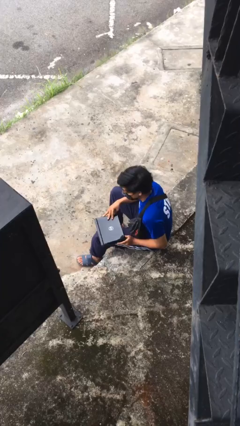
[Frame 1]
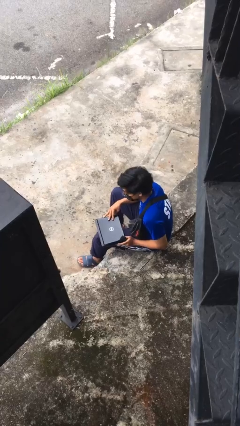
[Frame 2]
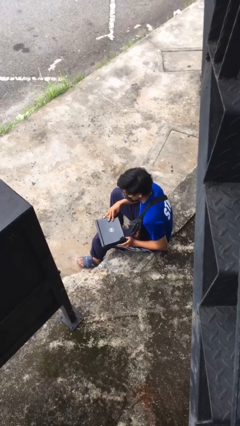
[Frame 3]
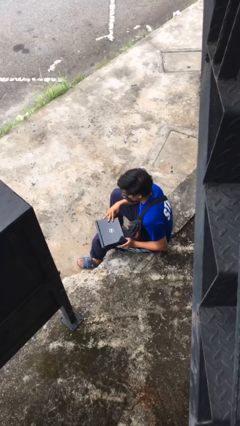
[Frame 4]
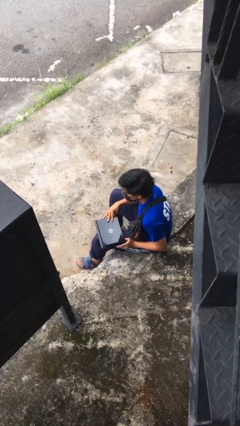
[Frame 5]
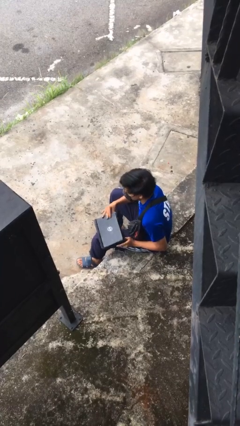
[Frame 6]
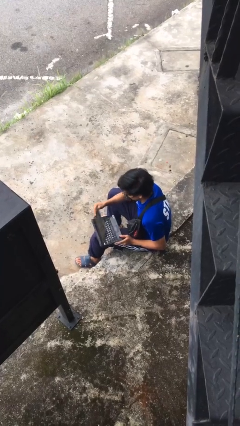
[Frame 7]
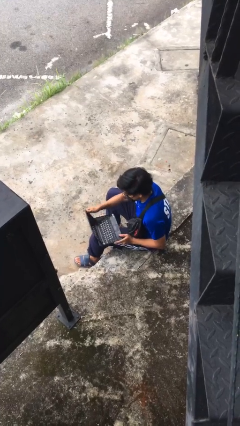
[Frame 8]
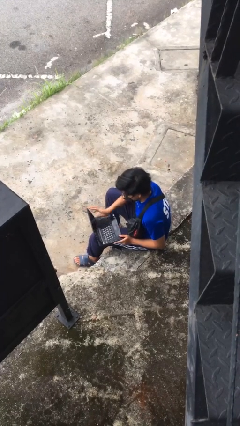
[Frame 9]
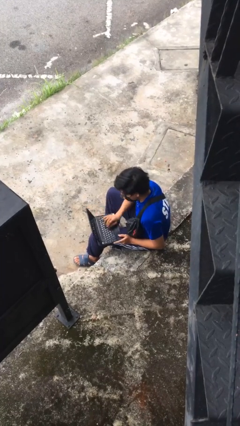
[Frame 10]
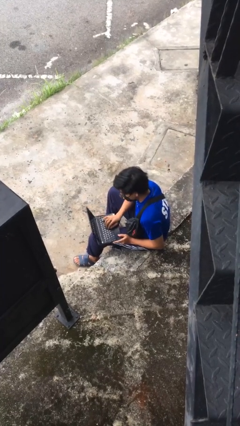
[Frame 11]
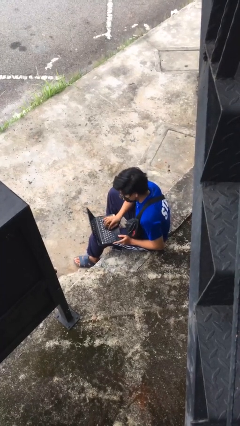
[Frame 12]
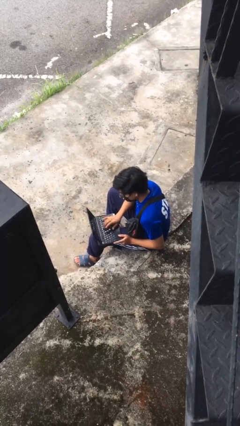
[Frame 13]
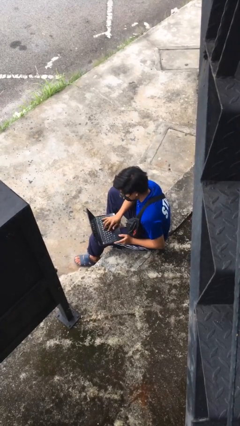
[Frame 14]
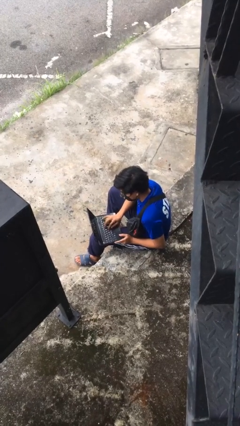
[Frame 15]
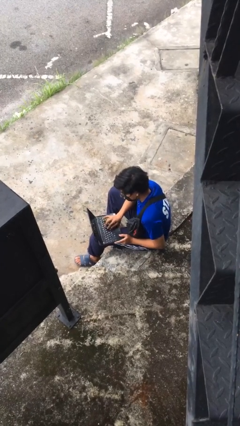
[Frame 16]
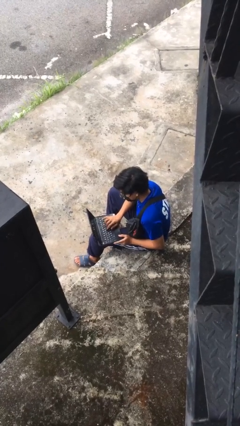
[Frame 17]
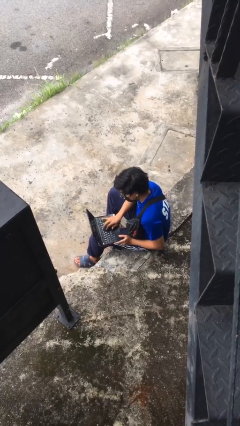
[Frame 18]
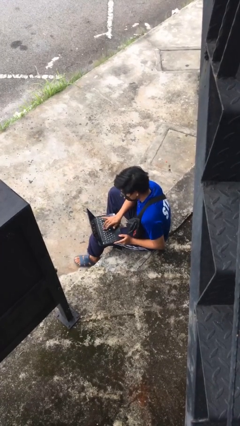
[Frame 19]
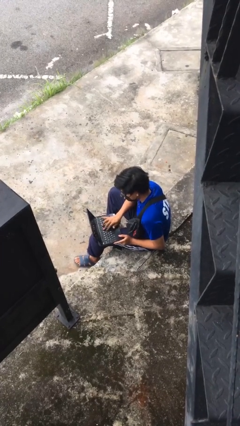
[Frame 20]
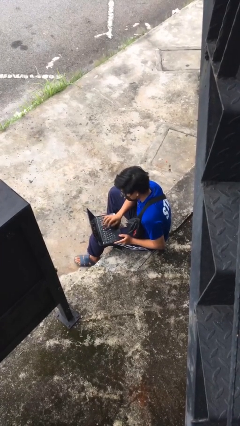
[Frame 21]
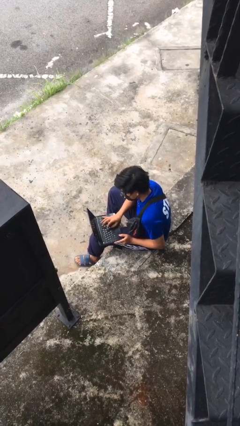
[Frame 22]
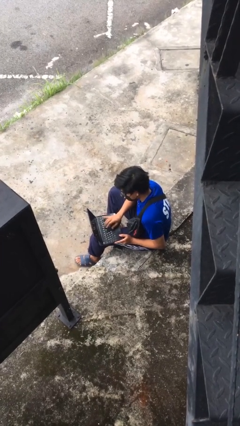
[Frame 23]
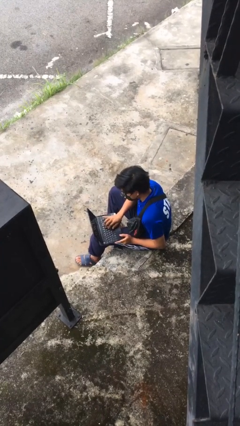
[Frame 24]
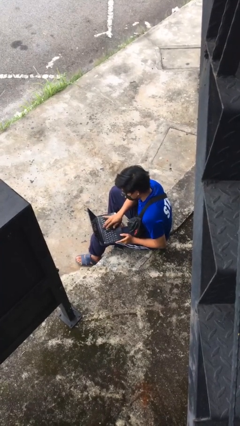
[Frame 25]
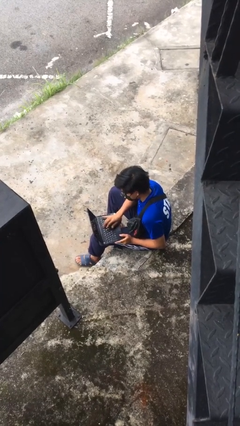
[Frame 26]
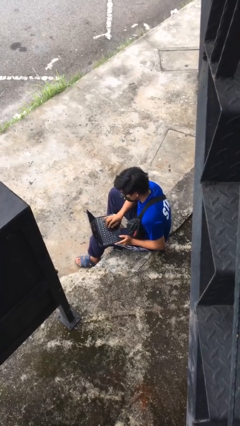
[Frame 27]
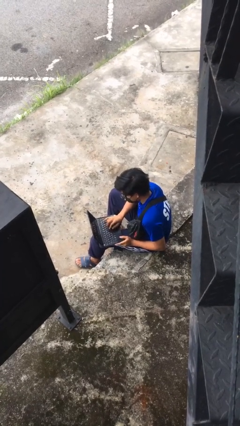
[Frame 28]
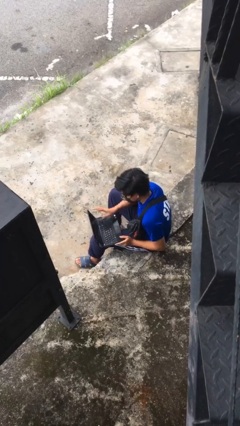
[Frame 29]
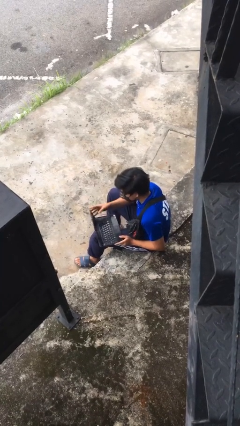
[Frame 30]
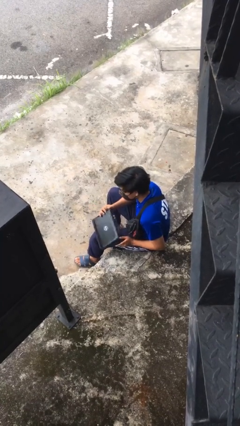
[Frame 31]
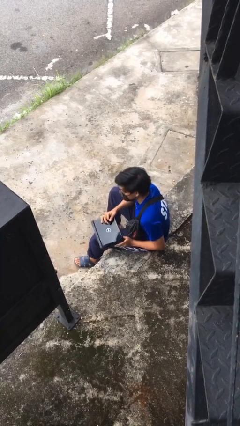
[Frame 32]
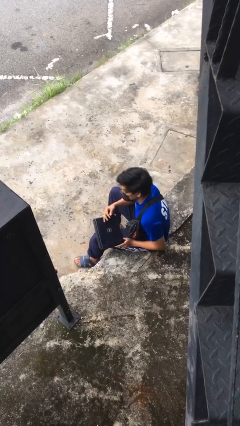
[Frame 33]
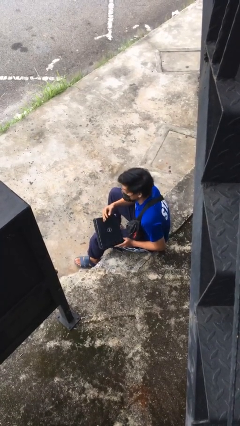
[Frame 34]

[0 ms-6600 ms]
person interacts with laptop

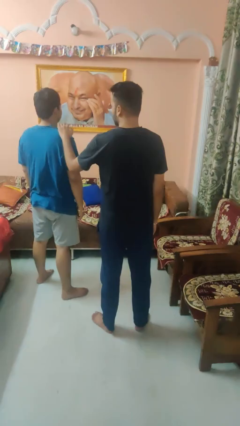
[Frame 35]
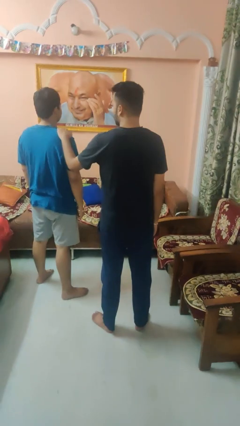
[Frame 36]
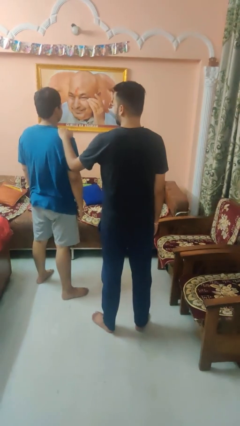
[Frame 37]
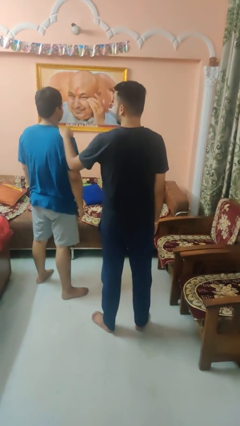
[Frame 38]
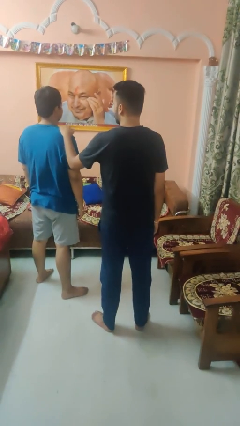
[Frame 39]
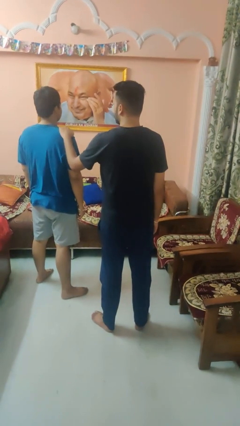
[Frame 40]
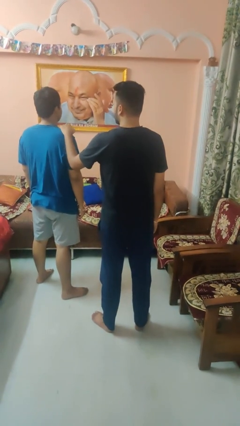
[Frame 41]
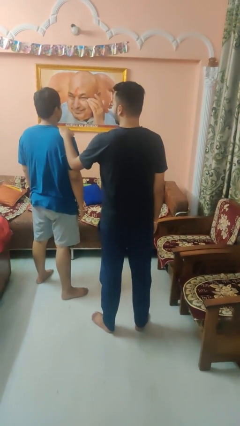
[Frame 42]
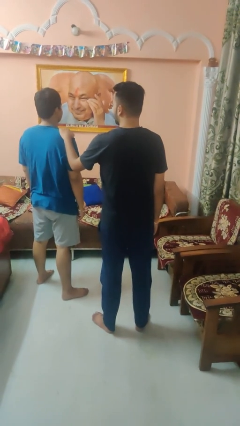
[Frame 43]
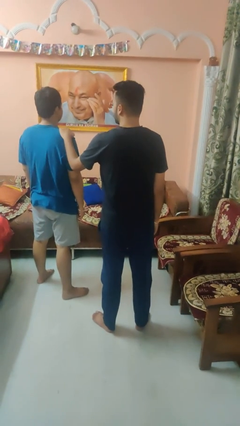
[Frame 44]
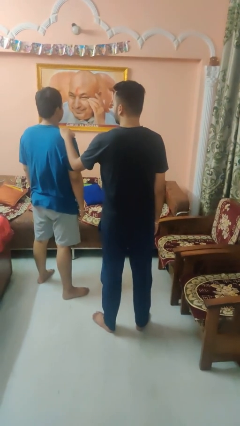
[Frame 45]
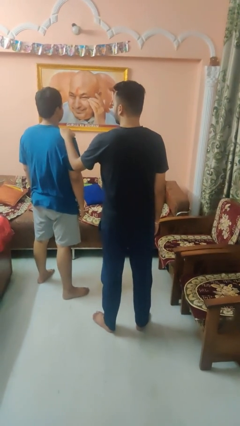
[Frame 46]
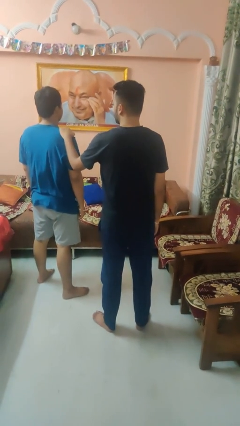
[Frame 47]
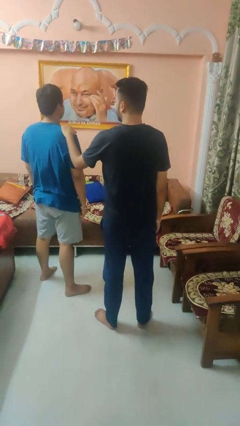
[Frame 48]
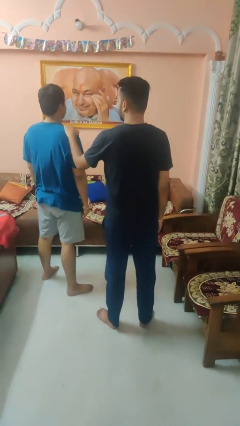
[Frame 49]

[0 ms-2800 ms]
person pounds shoulders of person

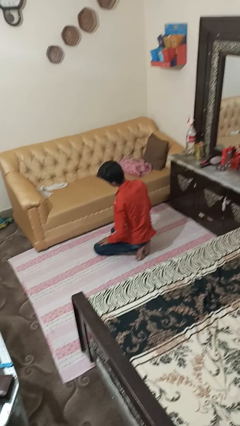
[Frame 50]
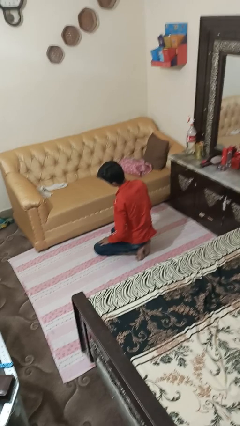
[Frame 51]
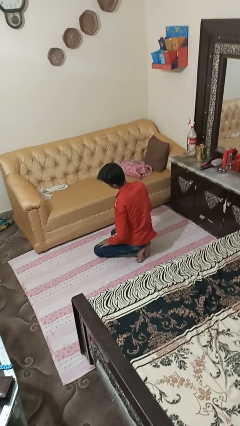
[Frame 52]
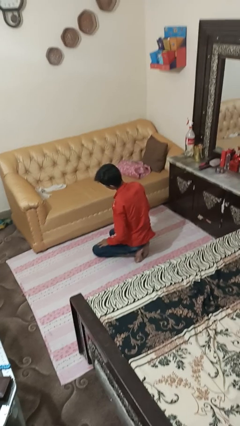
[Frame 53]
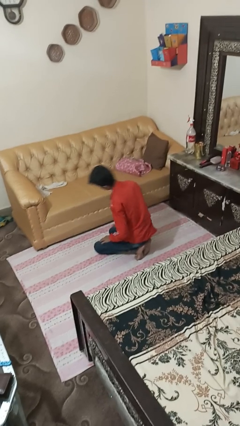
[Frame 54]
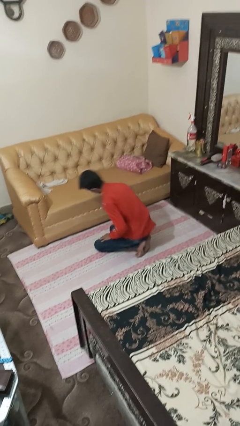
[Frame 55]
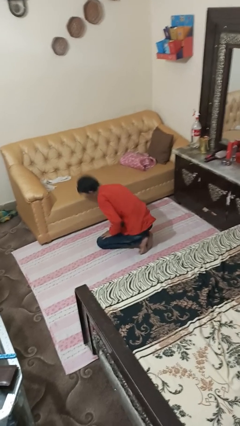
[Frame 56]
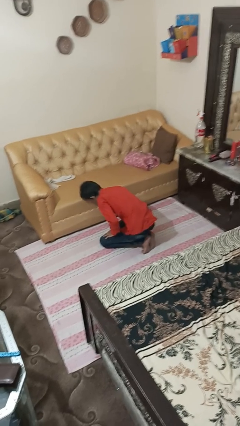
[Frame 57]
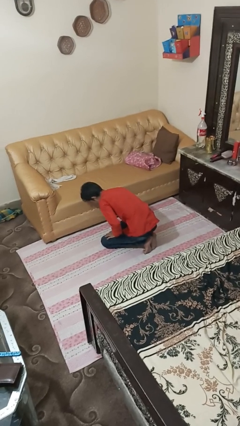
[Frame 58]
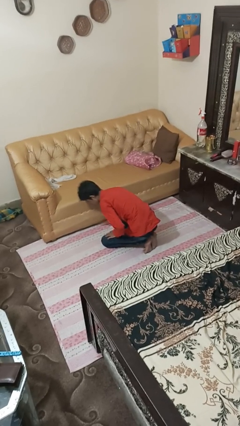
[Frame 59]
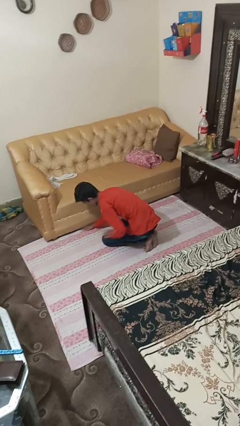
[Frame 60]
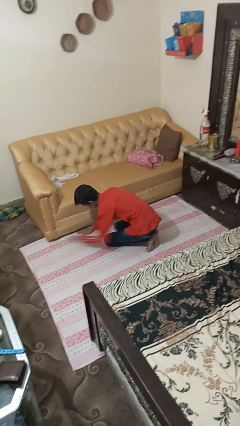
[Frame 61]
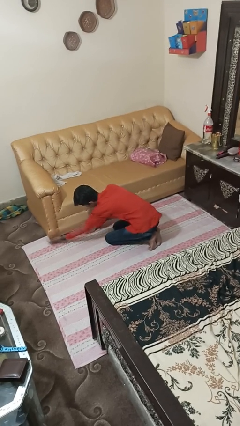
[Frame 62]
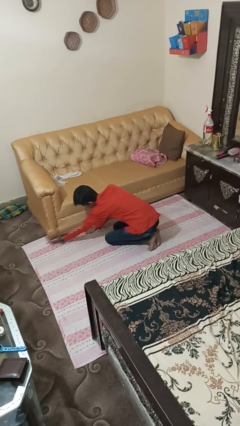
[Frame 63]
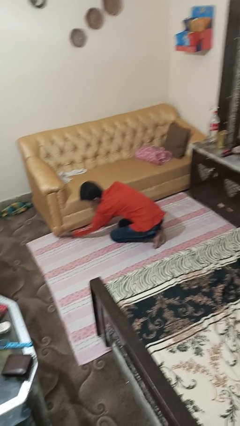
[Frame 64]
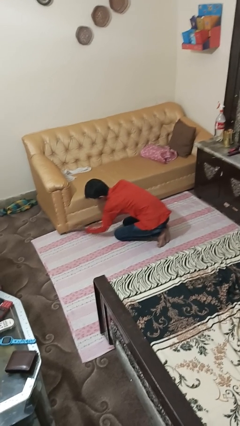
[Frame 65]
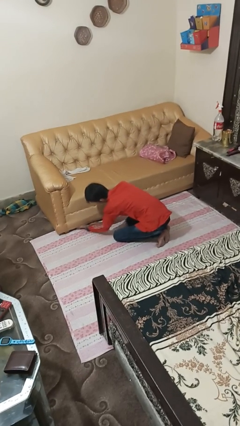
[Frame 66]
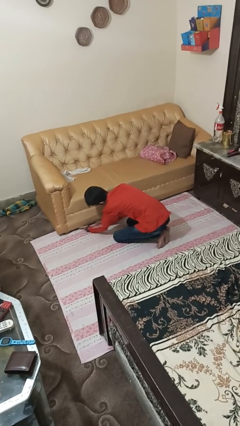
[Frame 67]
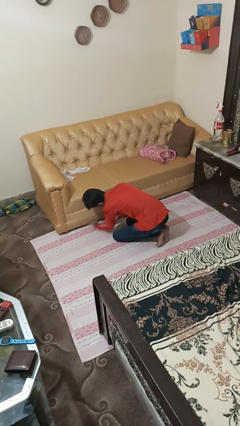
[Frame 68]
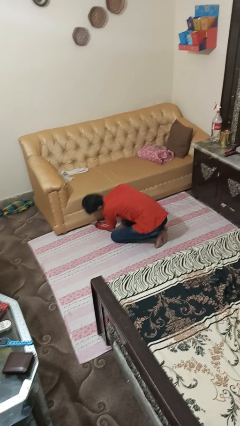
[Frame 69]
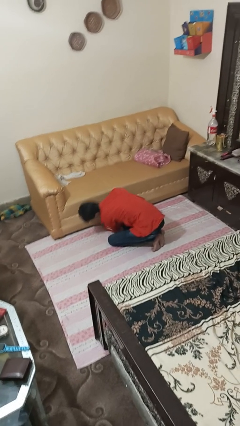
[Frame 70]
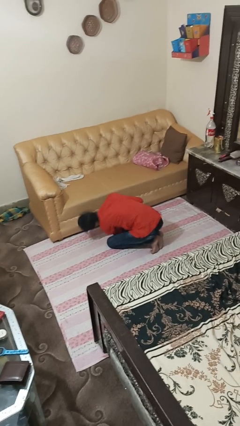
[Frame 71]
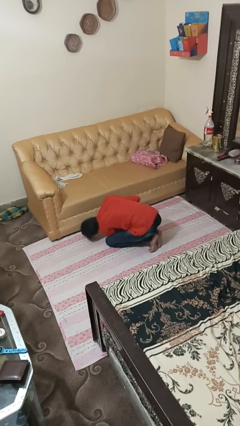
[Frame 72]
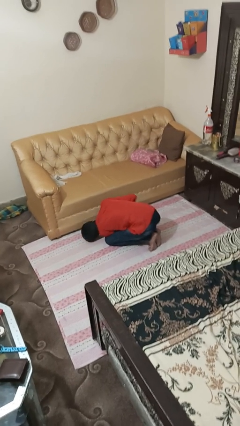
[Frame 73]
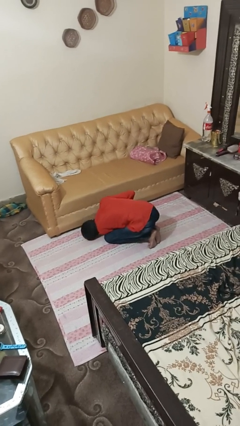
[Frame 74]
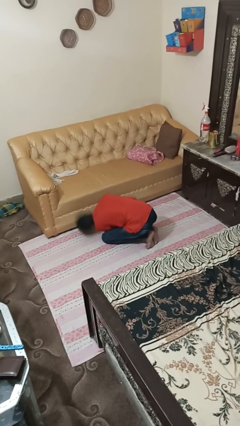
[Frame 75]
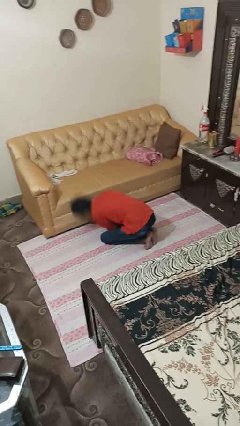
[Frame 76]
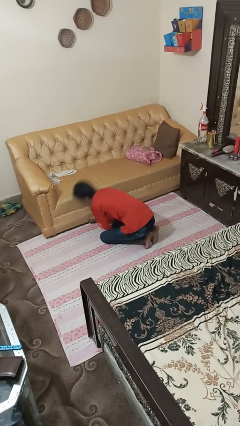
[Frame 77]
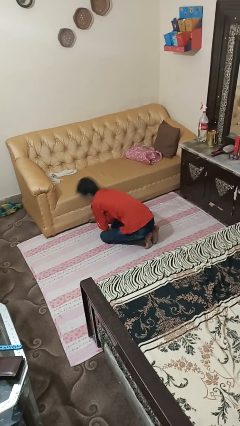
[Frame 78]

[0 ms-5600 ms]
person searches under couch

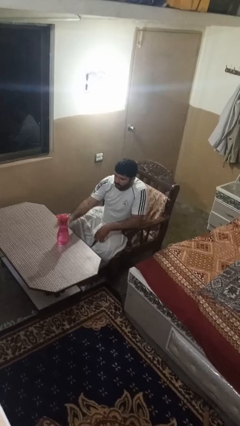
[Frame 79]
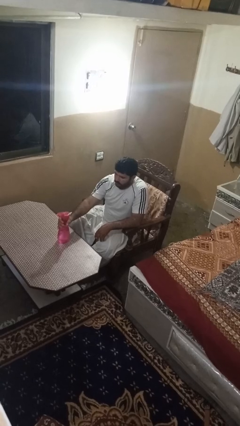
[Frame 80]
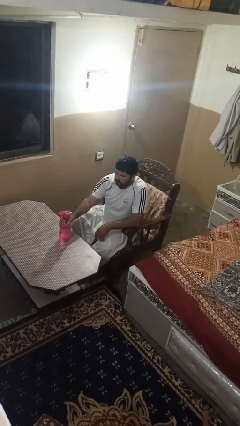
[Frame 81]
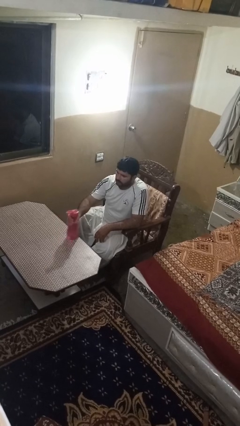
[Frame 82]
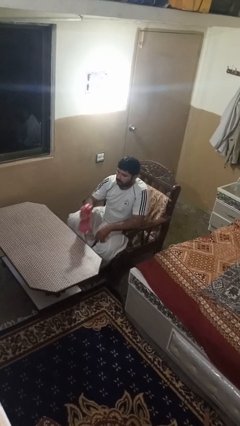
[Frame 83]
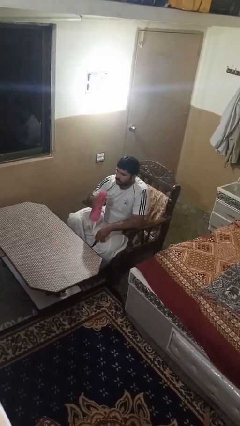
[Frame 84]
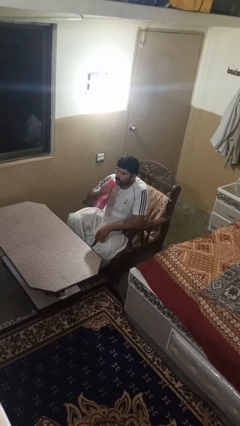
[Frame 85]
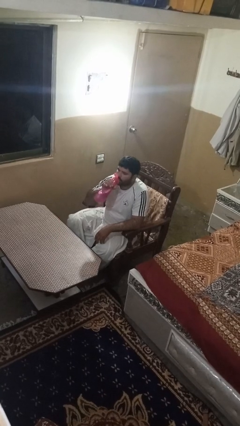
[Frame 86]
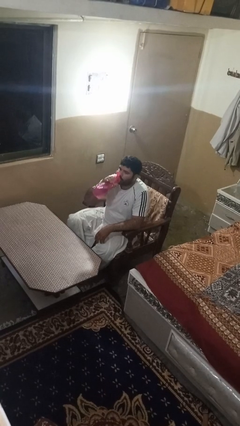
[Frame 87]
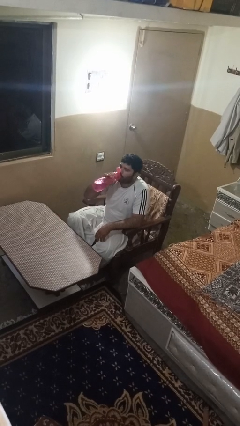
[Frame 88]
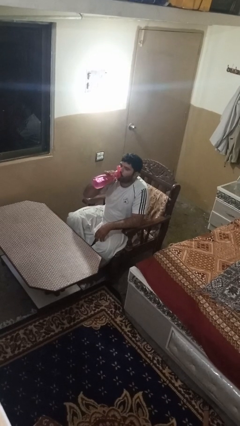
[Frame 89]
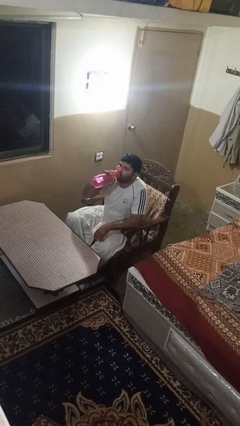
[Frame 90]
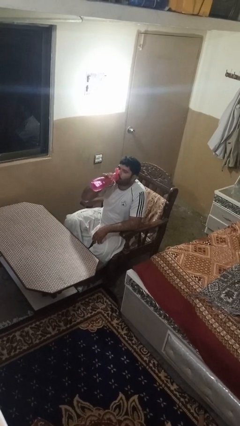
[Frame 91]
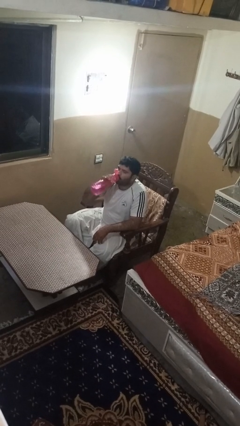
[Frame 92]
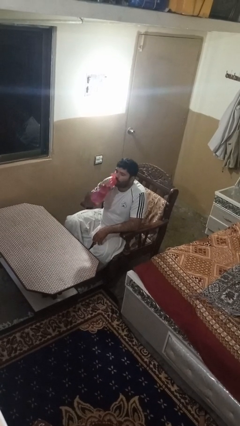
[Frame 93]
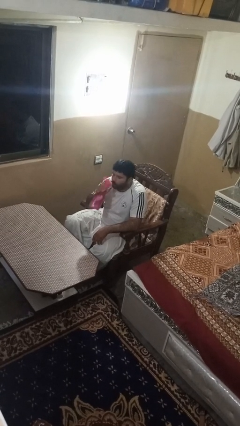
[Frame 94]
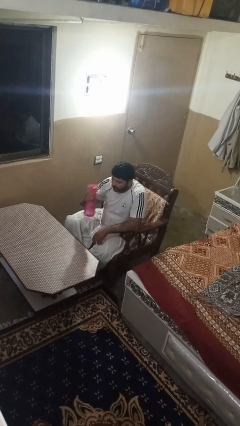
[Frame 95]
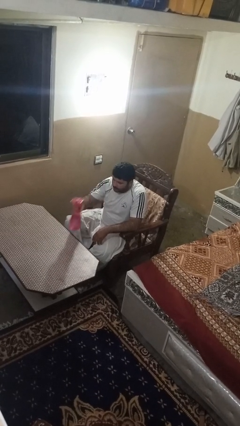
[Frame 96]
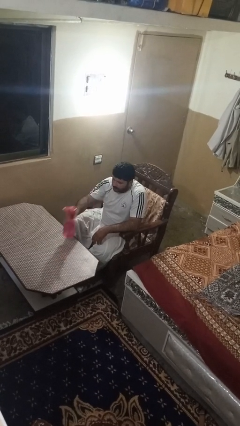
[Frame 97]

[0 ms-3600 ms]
person drinks from bottle
